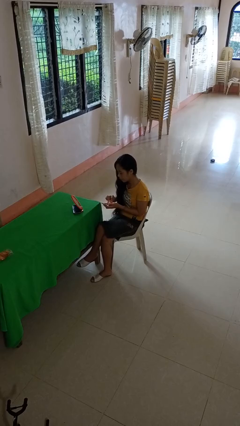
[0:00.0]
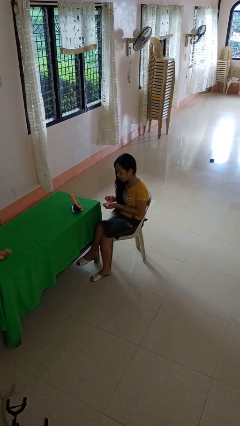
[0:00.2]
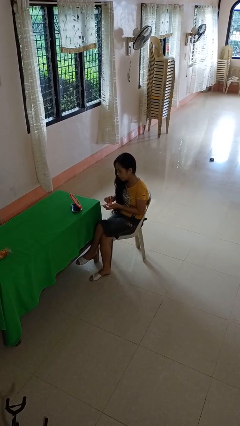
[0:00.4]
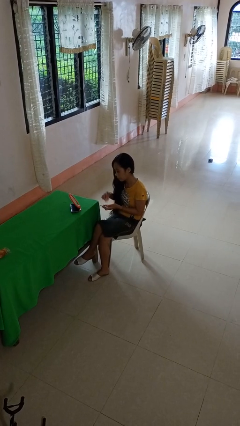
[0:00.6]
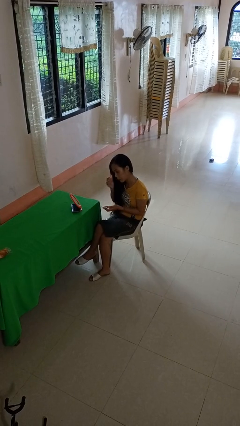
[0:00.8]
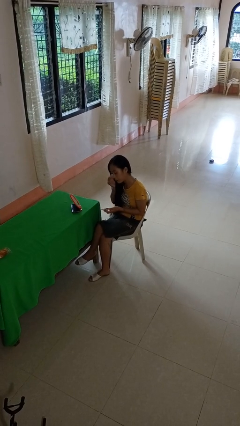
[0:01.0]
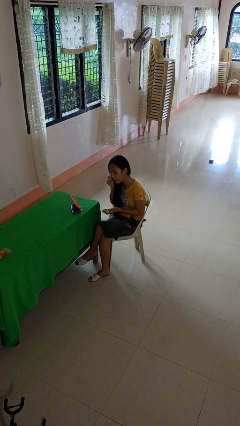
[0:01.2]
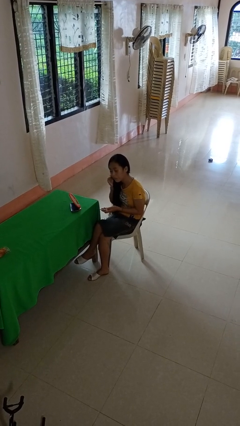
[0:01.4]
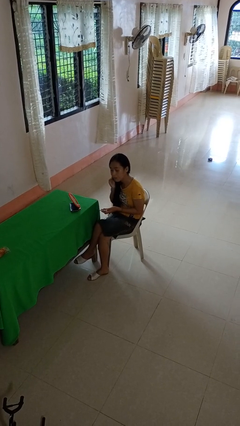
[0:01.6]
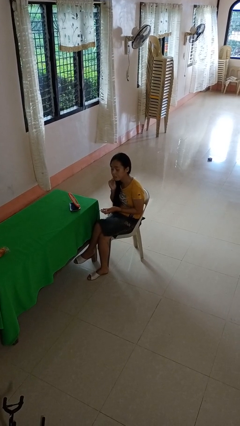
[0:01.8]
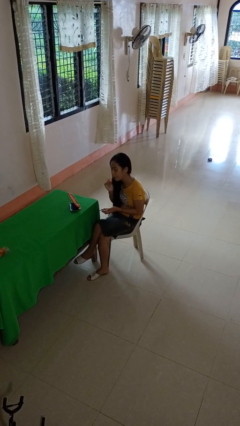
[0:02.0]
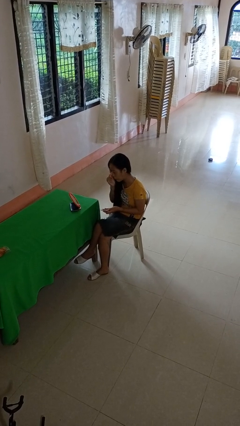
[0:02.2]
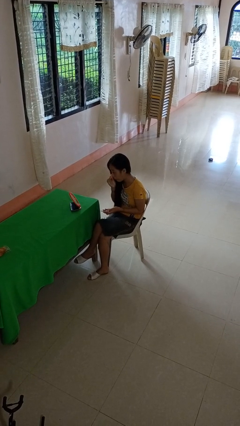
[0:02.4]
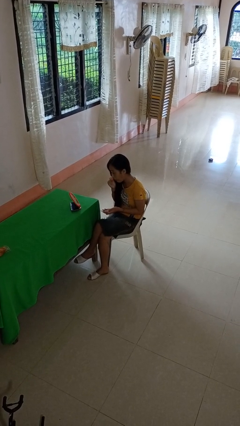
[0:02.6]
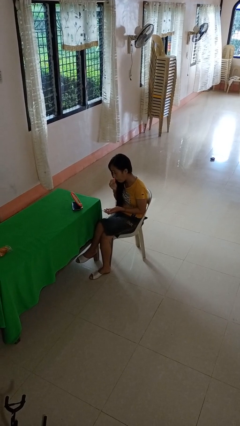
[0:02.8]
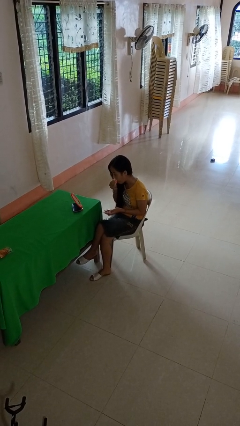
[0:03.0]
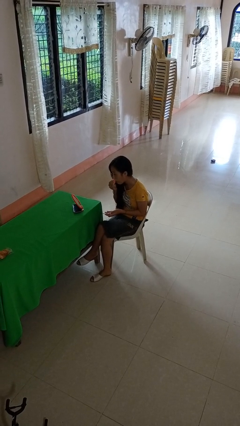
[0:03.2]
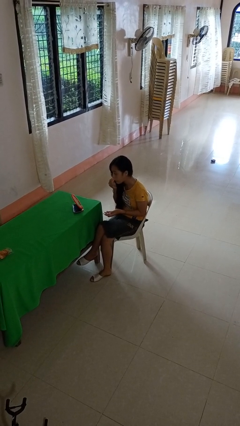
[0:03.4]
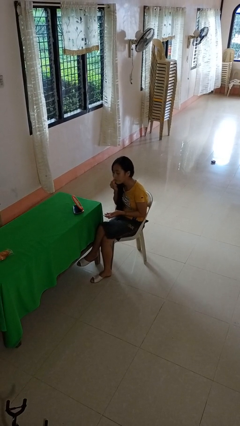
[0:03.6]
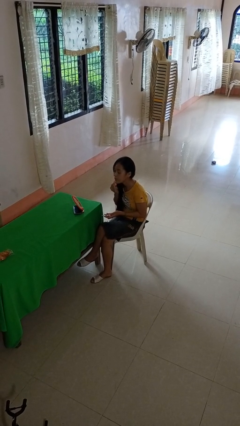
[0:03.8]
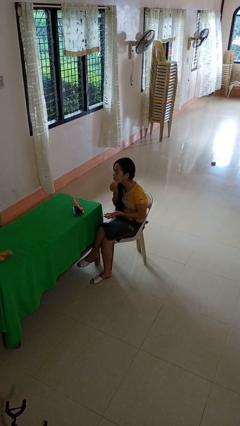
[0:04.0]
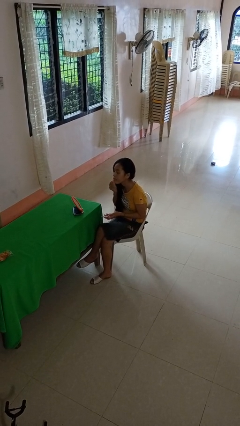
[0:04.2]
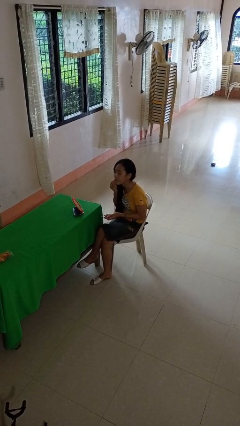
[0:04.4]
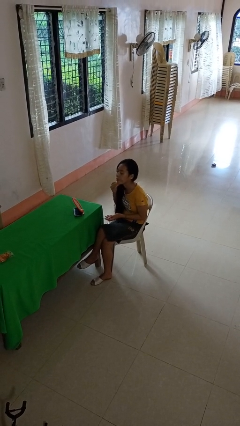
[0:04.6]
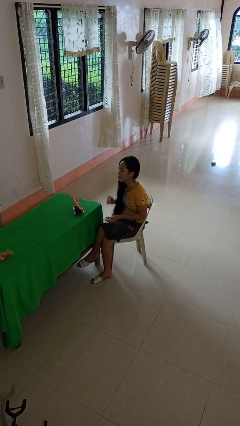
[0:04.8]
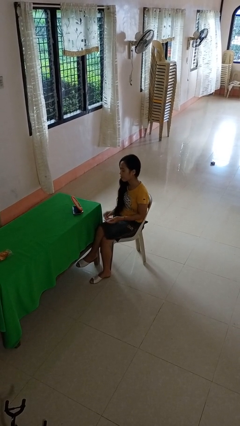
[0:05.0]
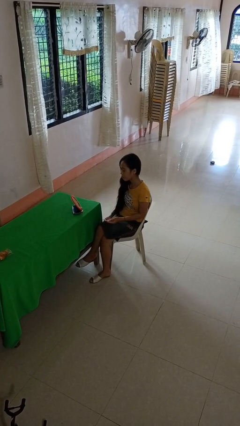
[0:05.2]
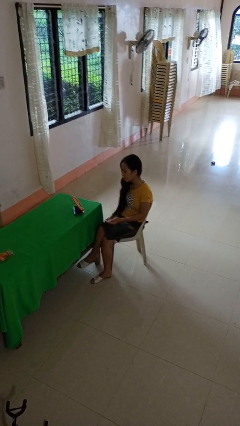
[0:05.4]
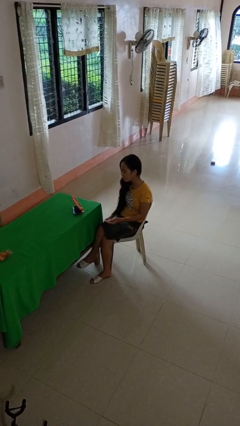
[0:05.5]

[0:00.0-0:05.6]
person applies foundation makeup

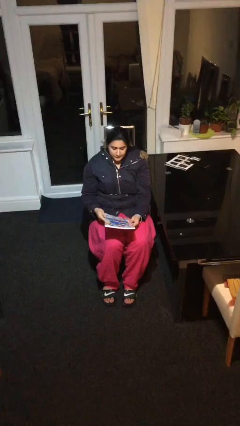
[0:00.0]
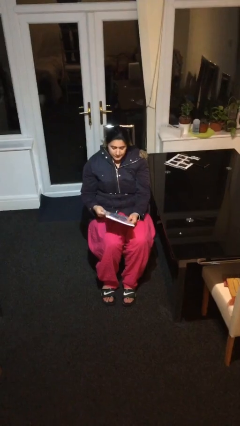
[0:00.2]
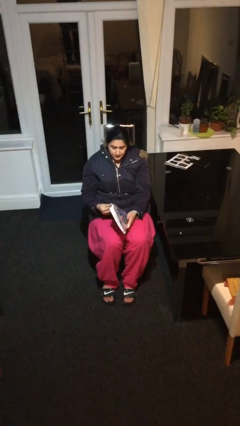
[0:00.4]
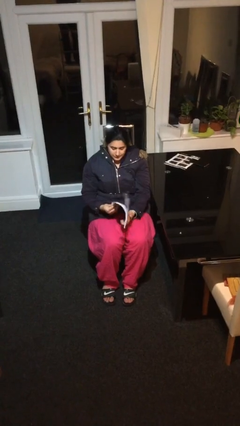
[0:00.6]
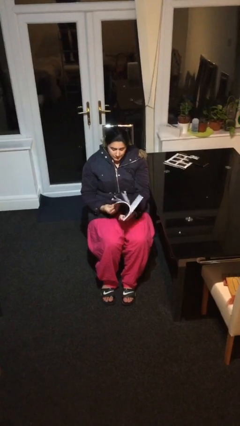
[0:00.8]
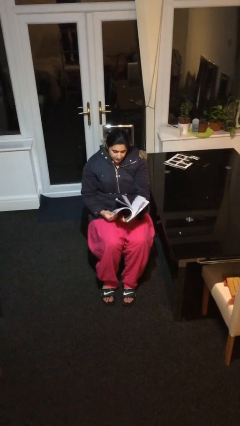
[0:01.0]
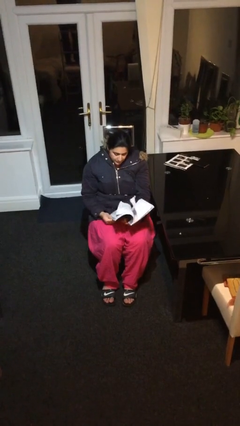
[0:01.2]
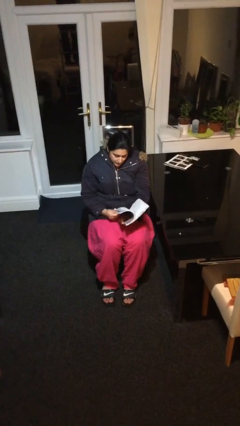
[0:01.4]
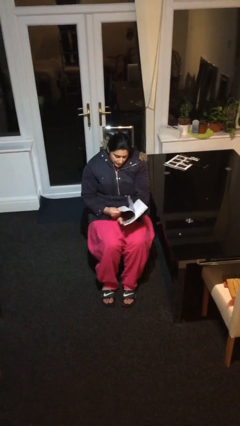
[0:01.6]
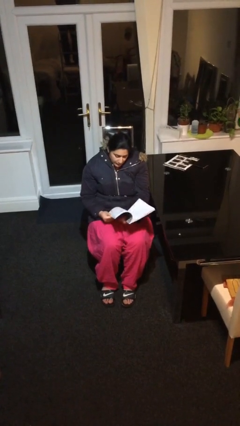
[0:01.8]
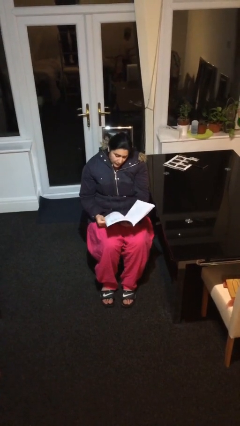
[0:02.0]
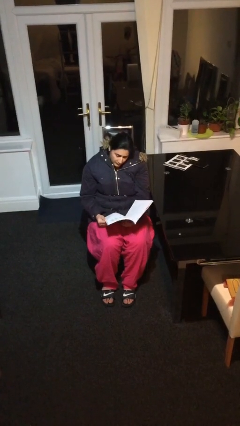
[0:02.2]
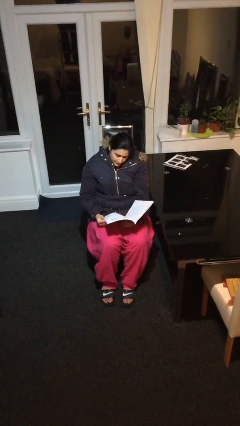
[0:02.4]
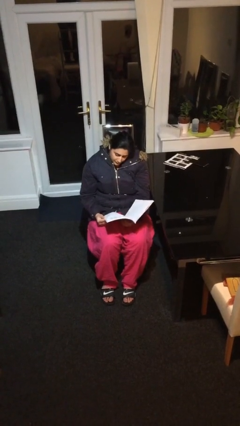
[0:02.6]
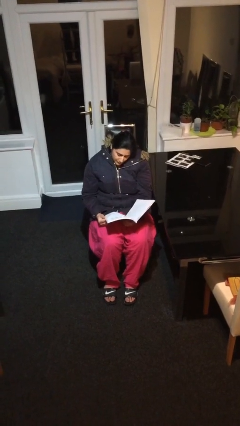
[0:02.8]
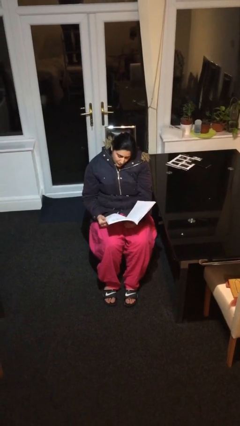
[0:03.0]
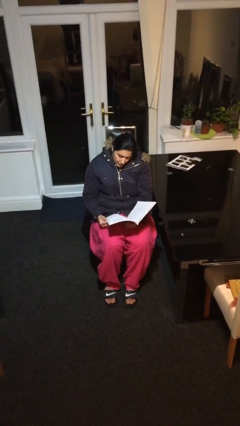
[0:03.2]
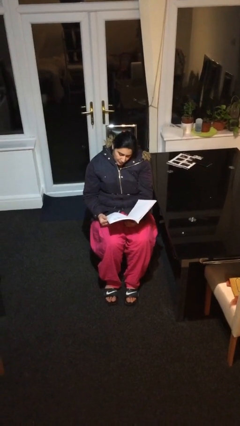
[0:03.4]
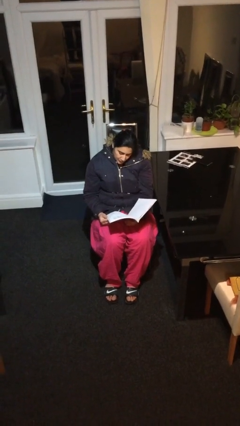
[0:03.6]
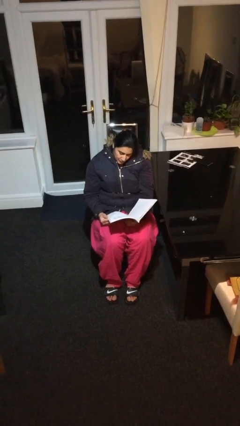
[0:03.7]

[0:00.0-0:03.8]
person reads document

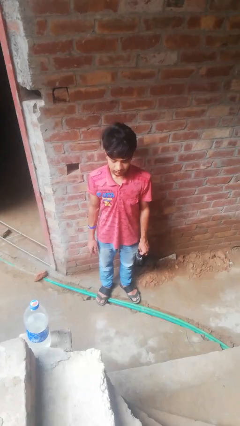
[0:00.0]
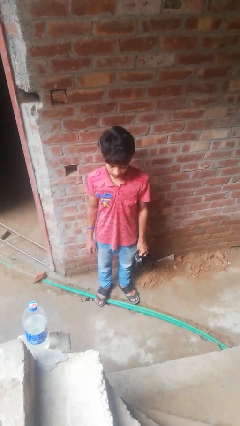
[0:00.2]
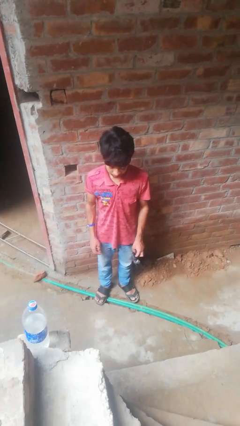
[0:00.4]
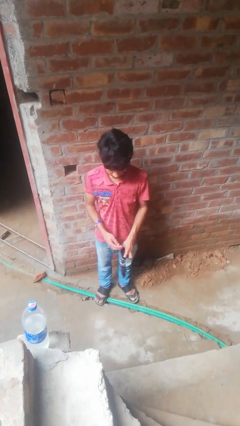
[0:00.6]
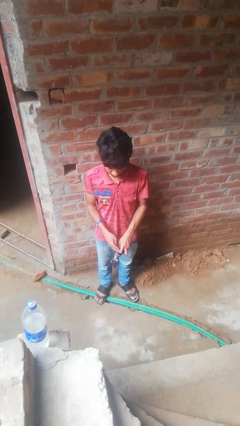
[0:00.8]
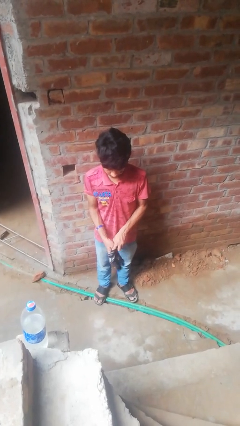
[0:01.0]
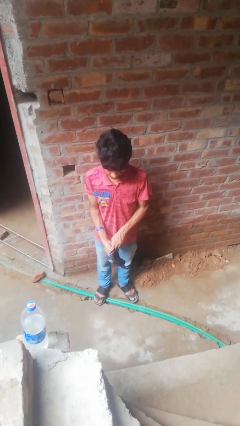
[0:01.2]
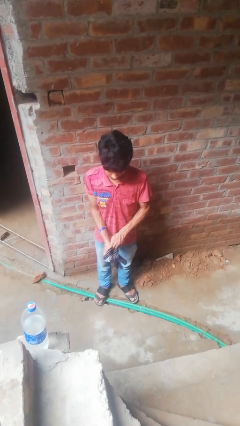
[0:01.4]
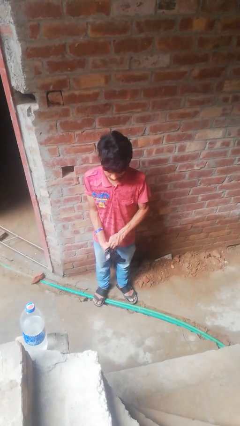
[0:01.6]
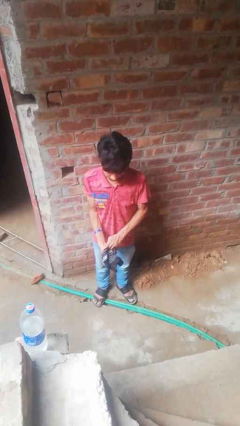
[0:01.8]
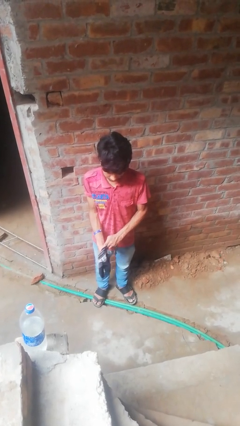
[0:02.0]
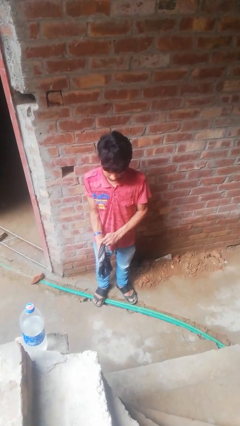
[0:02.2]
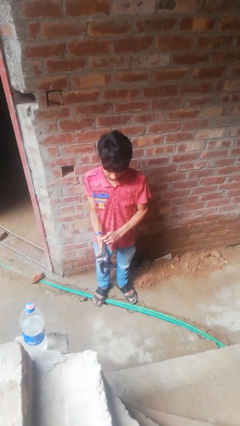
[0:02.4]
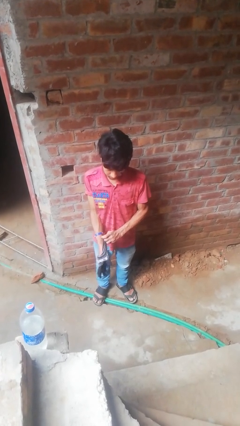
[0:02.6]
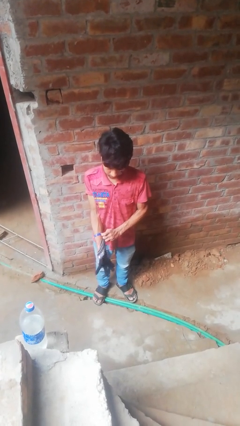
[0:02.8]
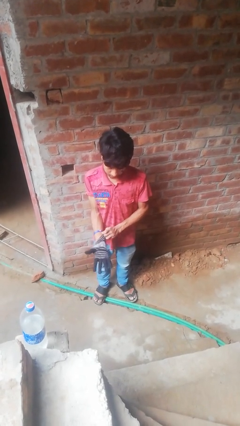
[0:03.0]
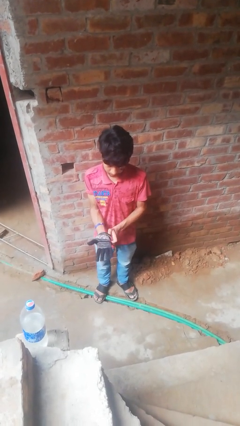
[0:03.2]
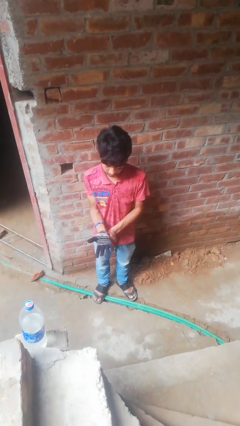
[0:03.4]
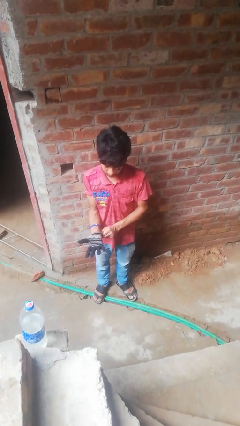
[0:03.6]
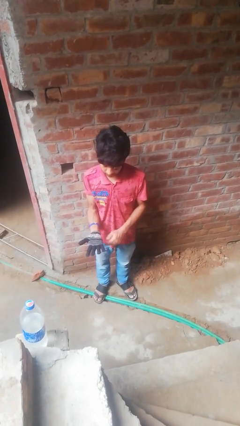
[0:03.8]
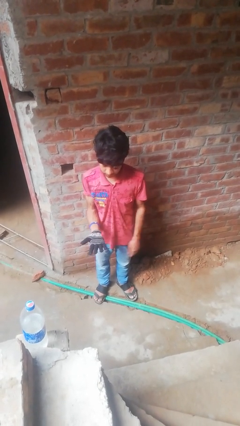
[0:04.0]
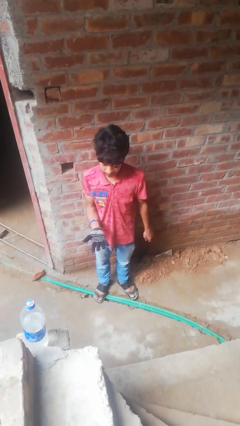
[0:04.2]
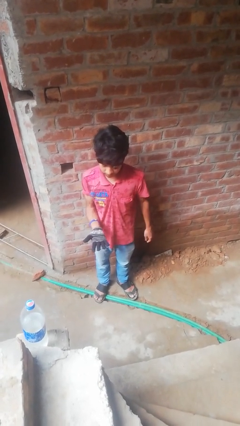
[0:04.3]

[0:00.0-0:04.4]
person puts on gloves

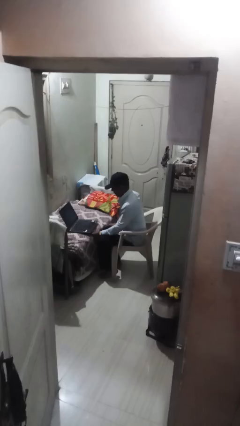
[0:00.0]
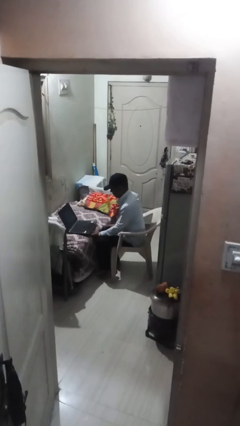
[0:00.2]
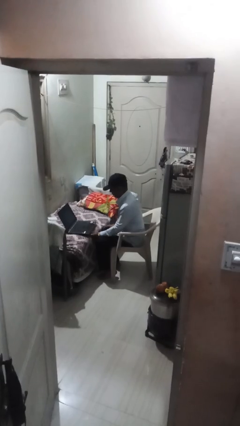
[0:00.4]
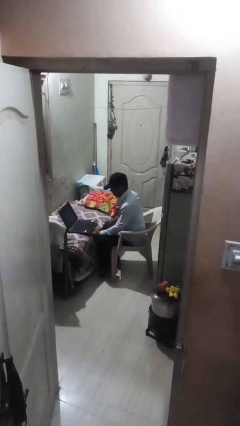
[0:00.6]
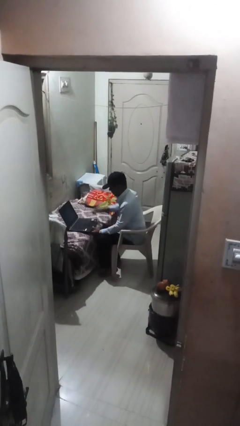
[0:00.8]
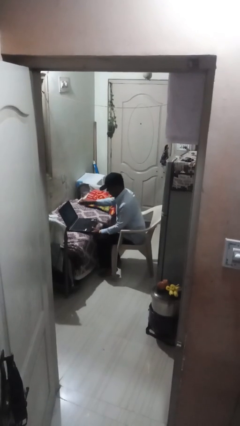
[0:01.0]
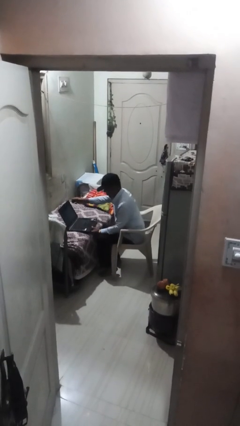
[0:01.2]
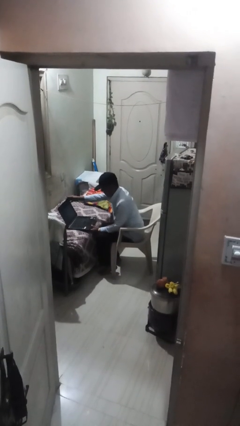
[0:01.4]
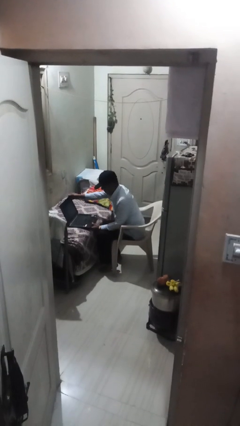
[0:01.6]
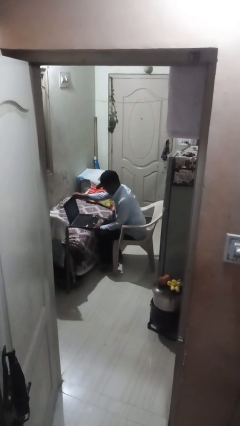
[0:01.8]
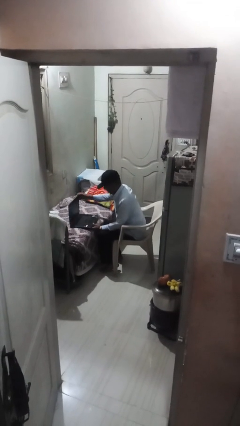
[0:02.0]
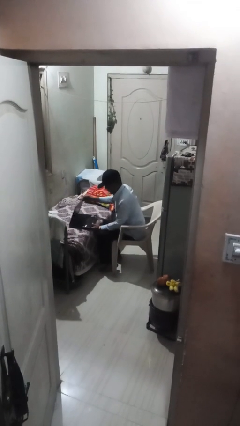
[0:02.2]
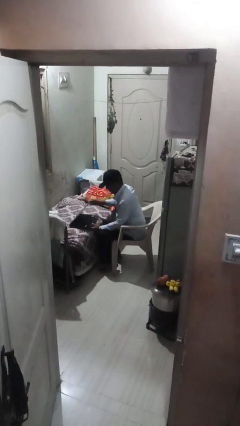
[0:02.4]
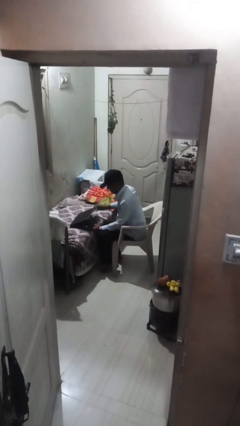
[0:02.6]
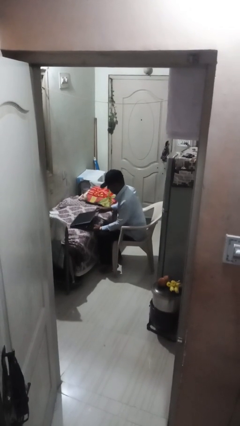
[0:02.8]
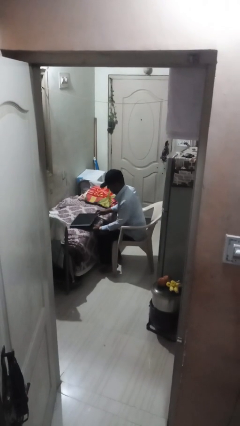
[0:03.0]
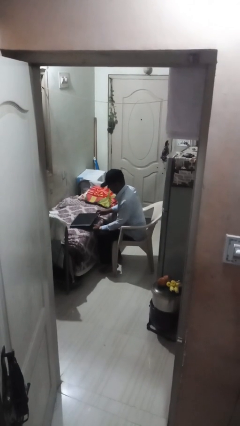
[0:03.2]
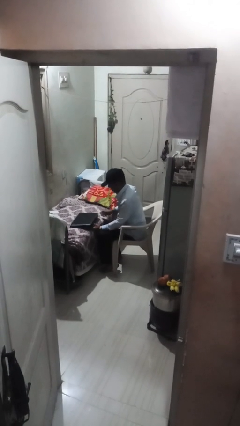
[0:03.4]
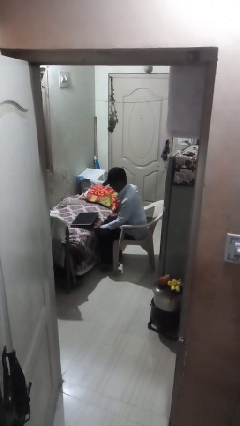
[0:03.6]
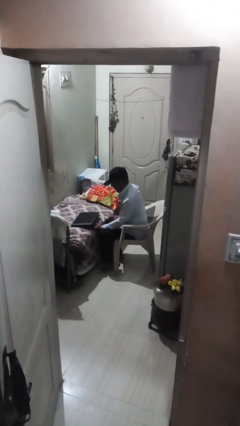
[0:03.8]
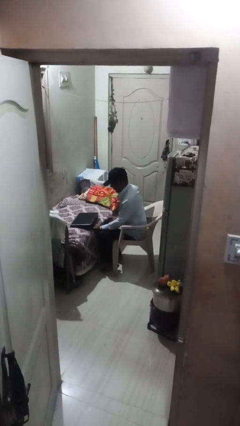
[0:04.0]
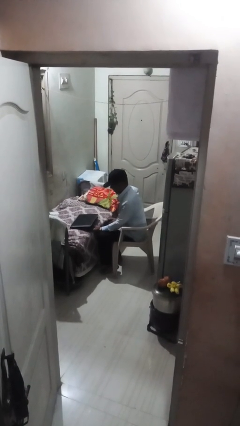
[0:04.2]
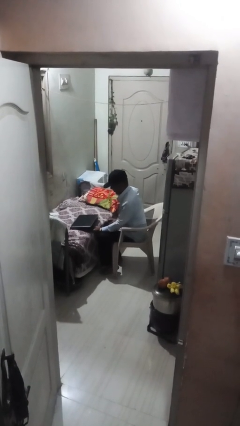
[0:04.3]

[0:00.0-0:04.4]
person closes laptop
